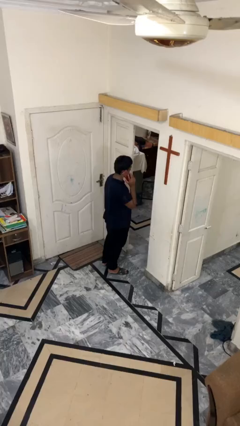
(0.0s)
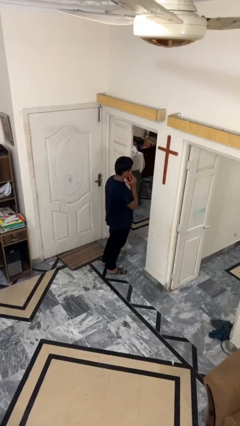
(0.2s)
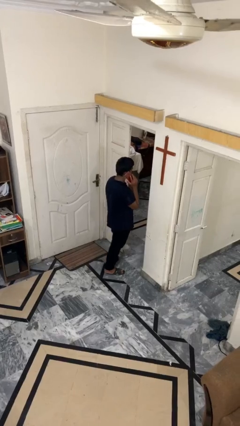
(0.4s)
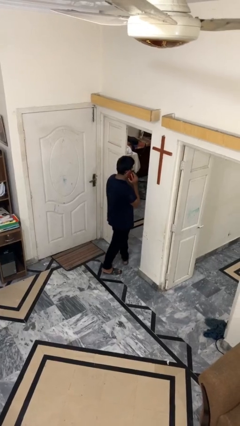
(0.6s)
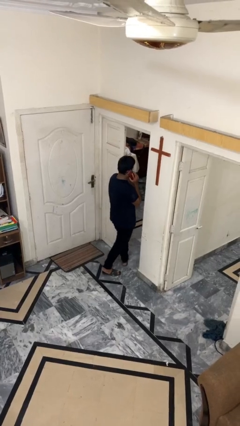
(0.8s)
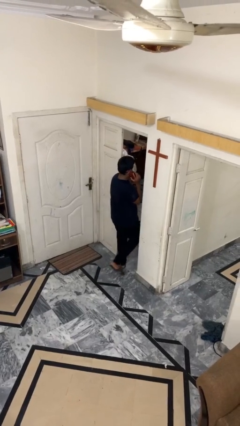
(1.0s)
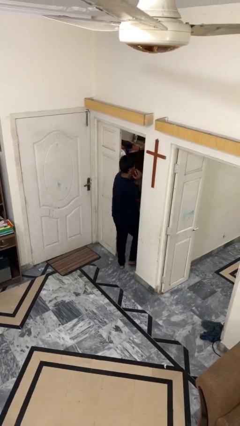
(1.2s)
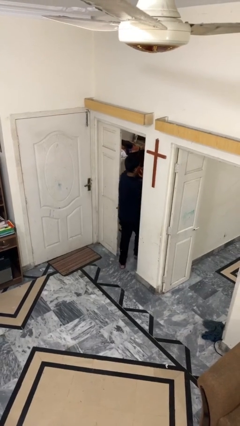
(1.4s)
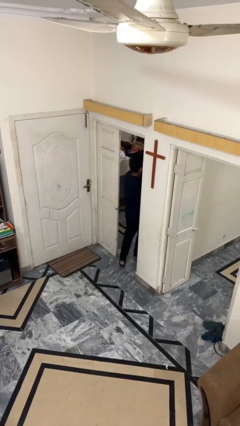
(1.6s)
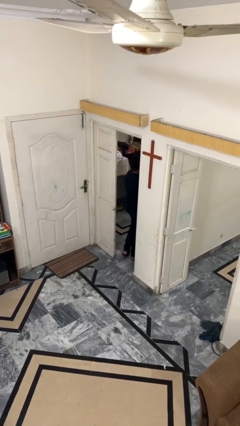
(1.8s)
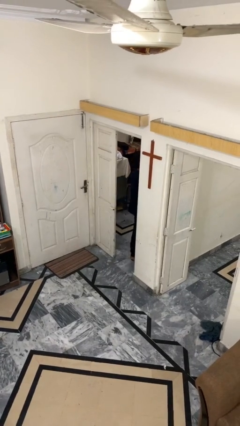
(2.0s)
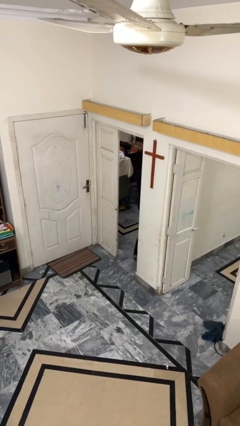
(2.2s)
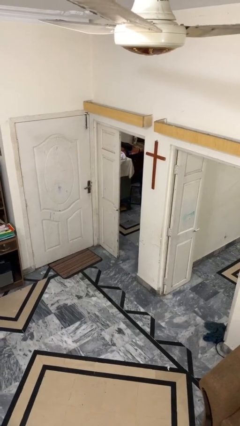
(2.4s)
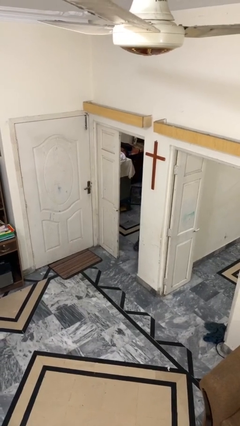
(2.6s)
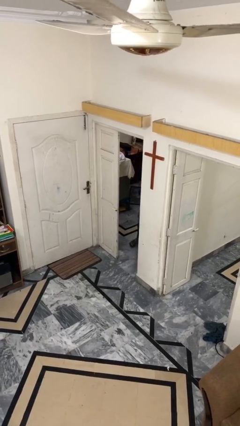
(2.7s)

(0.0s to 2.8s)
person exits scene through structure

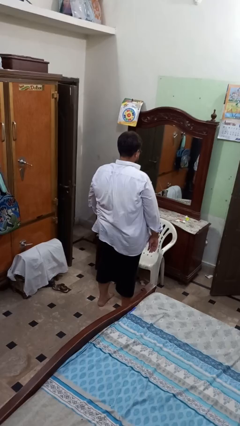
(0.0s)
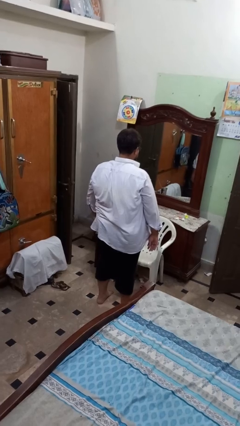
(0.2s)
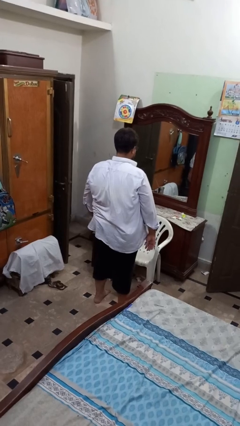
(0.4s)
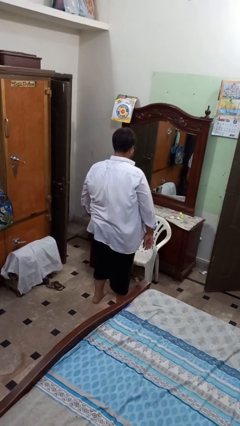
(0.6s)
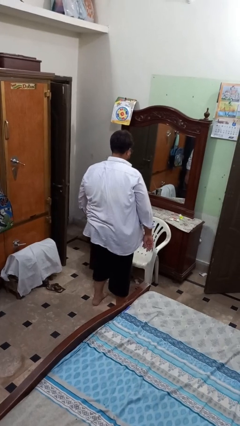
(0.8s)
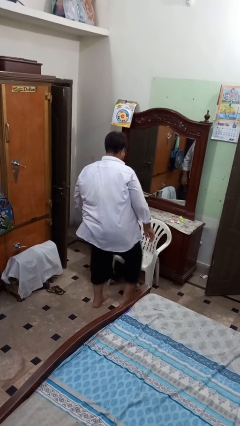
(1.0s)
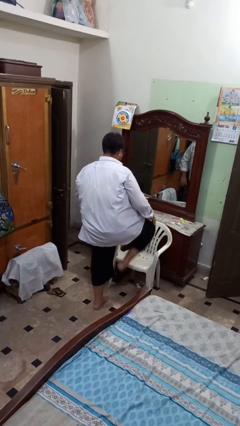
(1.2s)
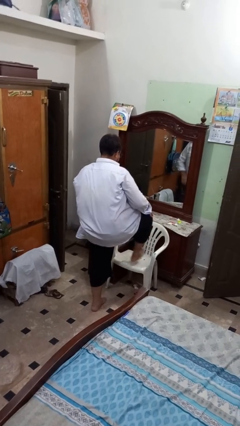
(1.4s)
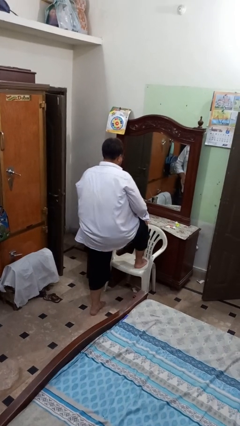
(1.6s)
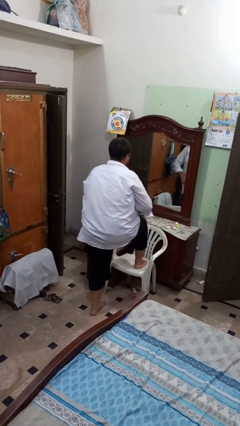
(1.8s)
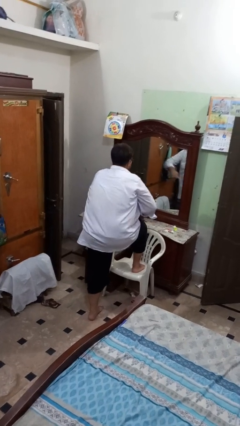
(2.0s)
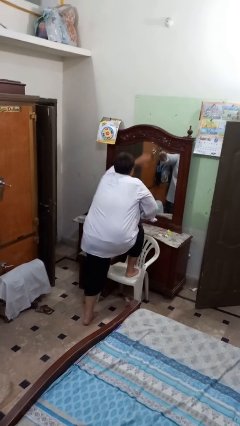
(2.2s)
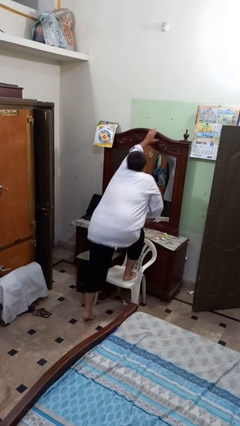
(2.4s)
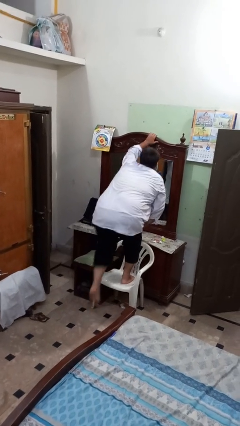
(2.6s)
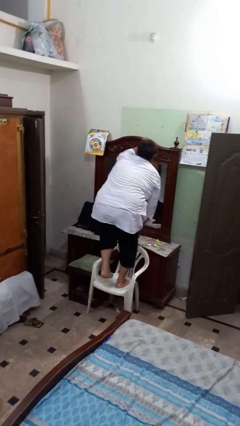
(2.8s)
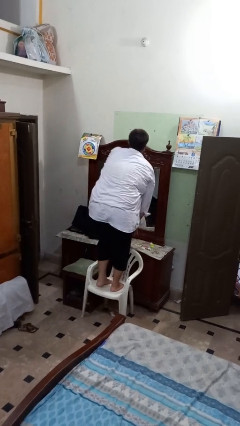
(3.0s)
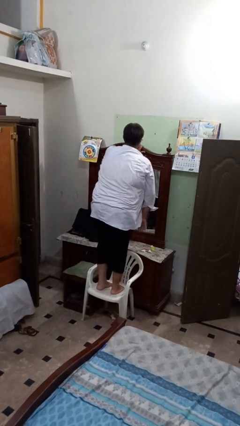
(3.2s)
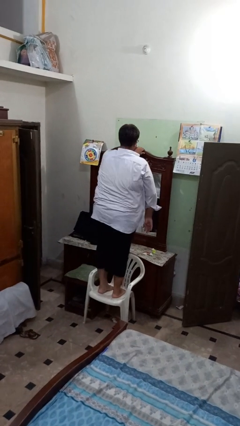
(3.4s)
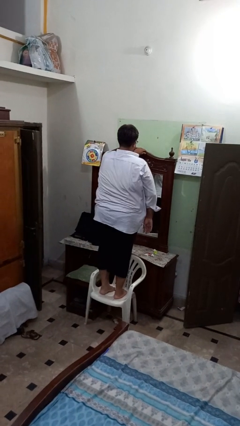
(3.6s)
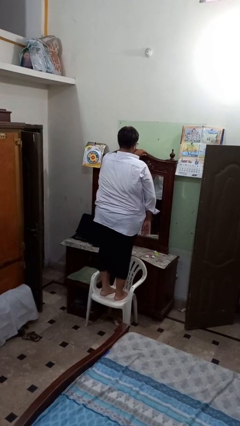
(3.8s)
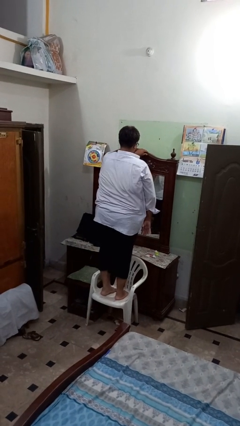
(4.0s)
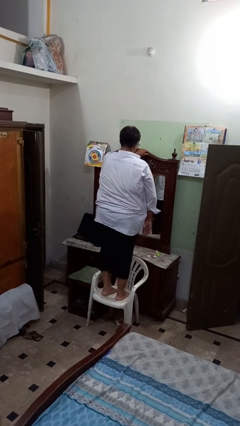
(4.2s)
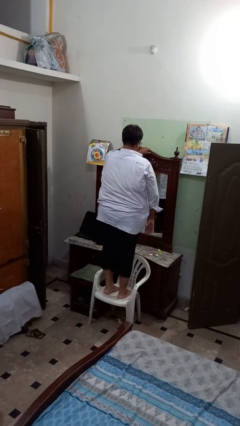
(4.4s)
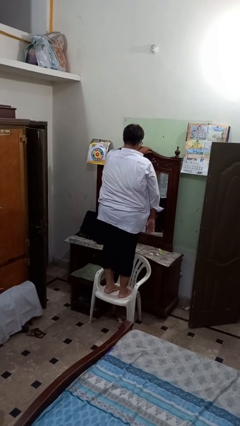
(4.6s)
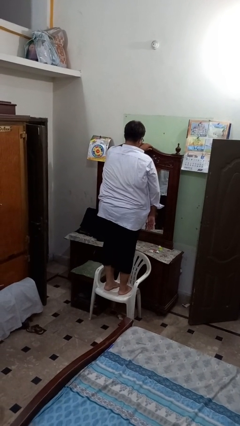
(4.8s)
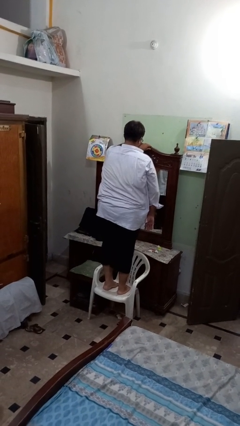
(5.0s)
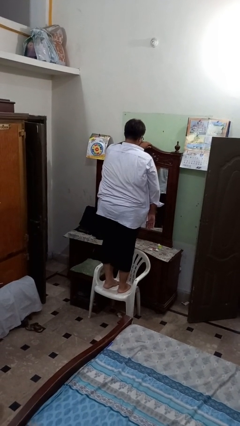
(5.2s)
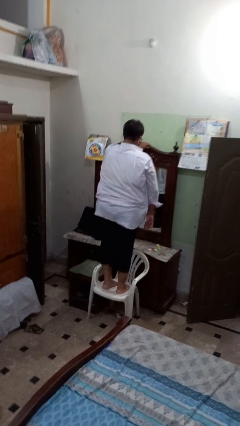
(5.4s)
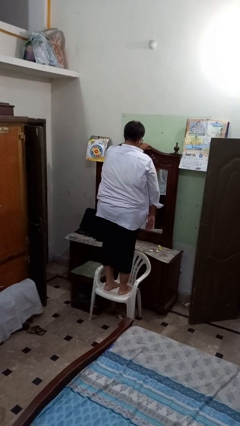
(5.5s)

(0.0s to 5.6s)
person climbs on chair

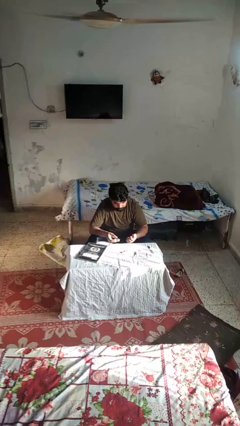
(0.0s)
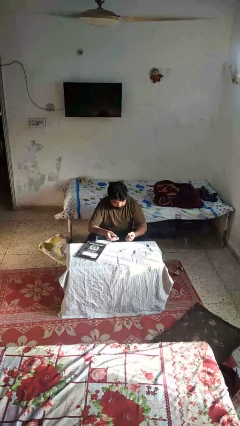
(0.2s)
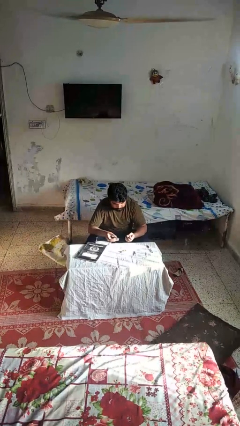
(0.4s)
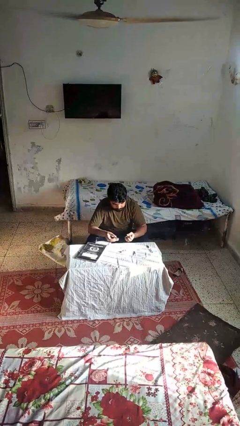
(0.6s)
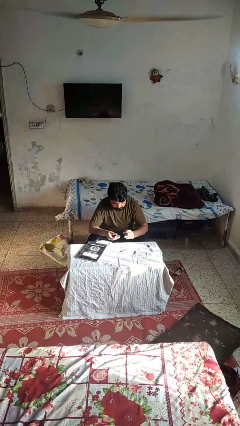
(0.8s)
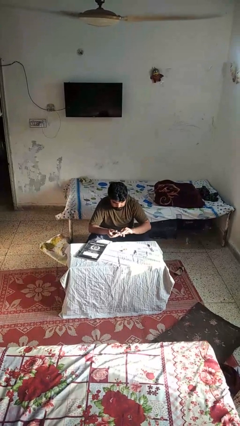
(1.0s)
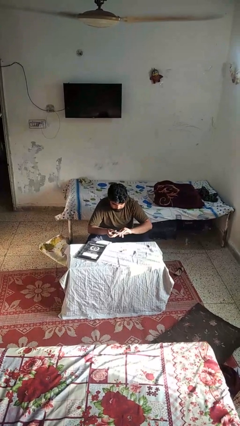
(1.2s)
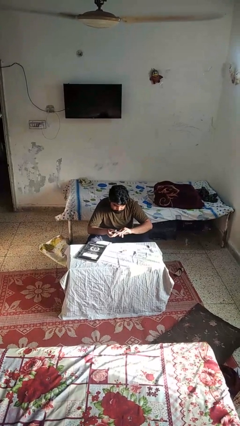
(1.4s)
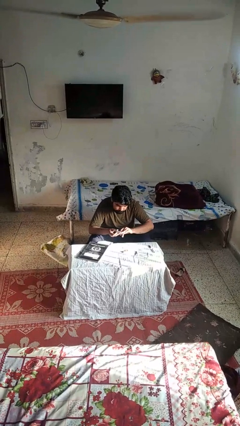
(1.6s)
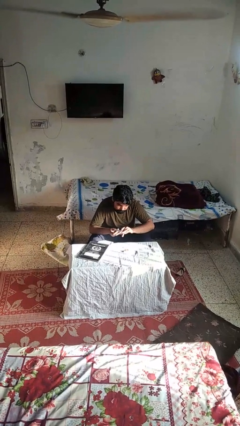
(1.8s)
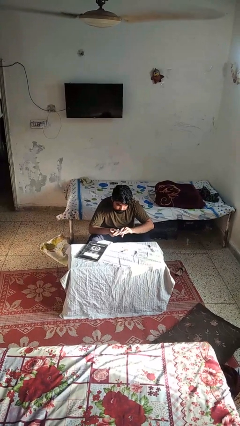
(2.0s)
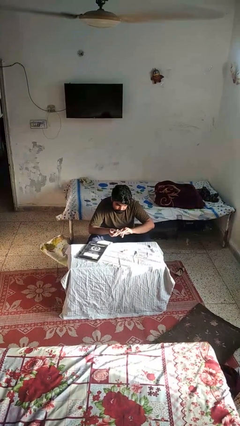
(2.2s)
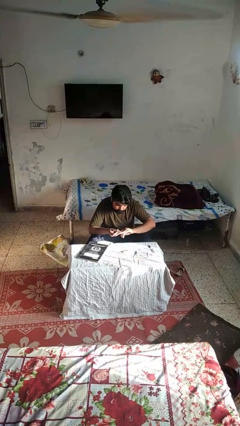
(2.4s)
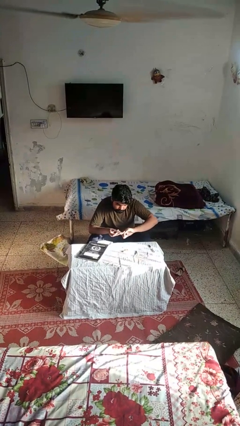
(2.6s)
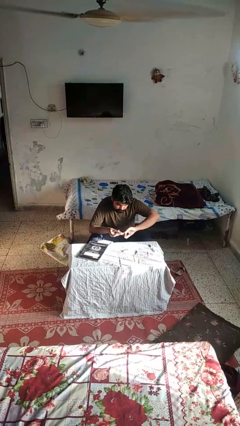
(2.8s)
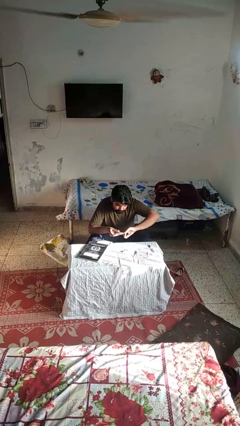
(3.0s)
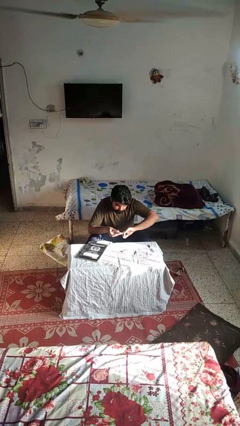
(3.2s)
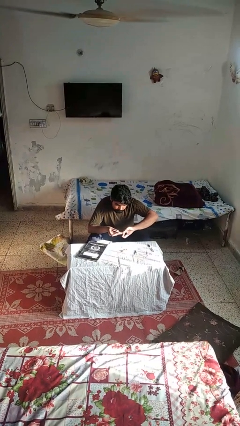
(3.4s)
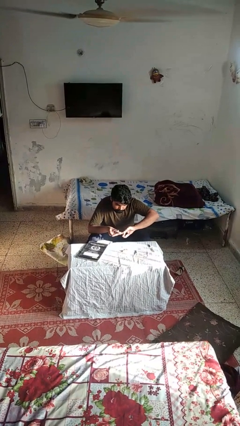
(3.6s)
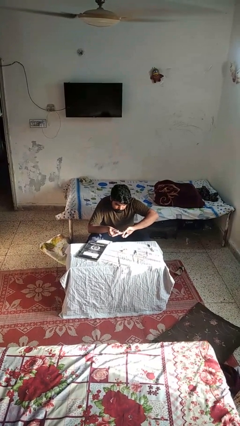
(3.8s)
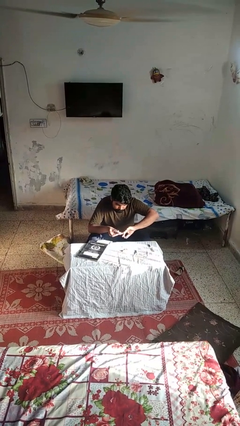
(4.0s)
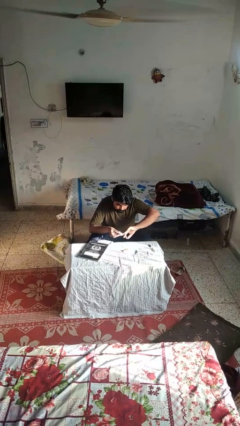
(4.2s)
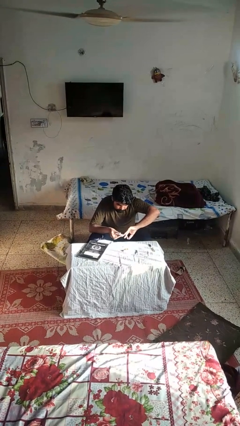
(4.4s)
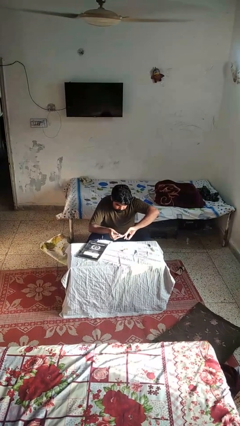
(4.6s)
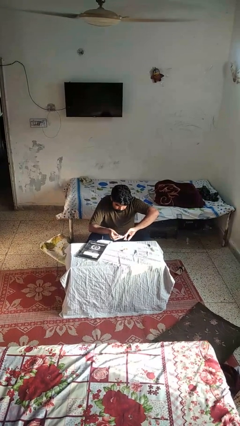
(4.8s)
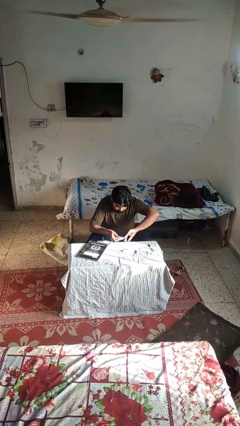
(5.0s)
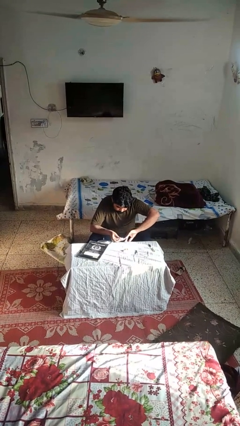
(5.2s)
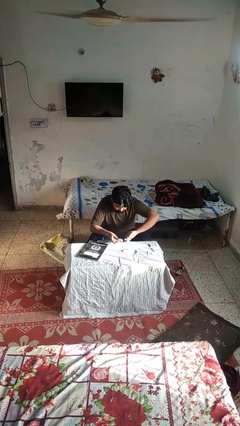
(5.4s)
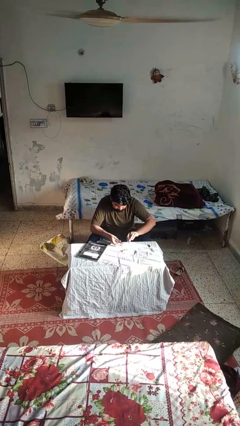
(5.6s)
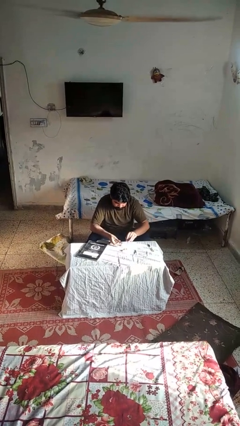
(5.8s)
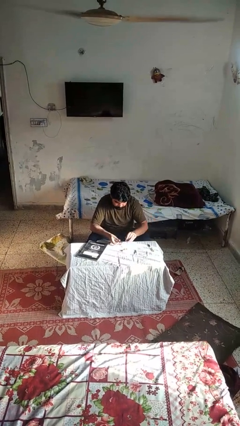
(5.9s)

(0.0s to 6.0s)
person clips fingernails

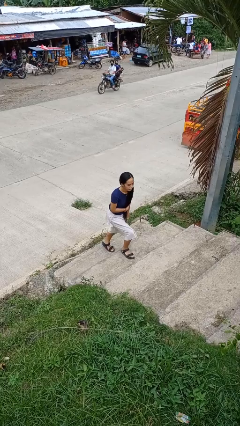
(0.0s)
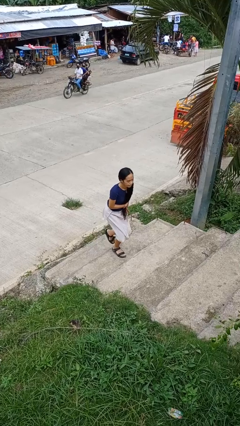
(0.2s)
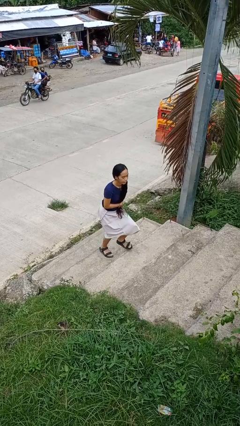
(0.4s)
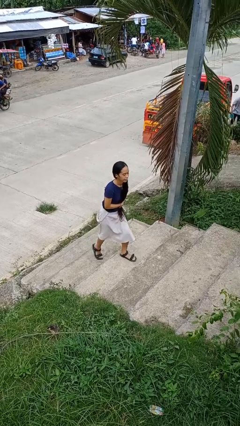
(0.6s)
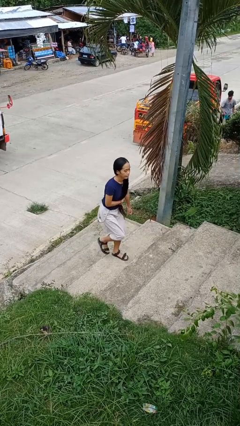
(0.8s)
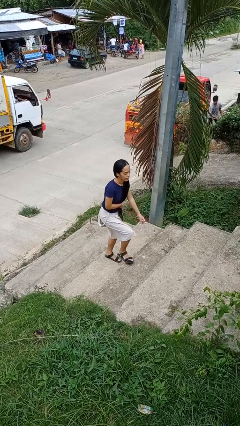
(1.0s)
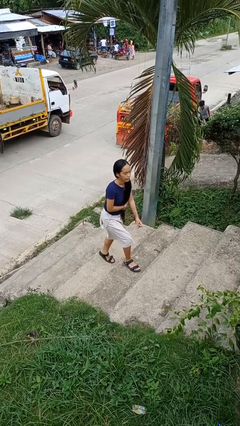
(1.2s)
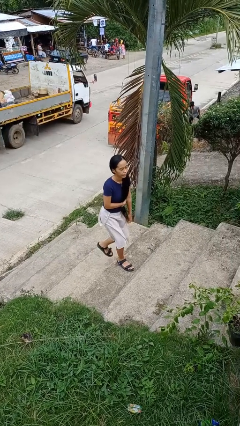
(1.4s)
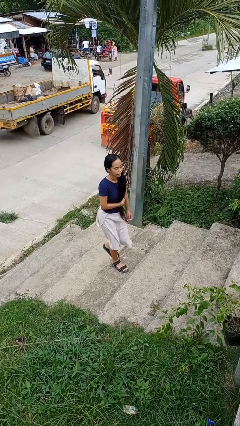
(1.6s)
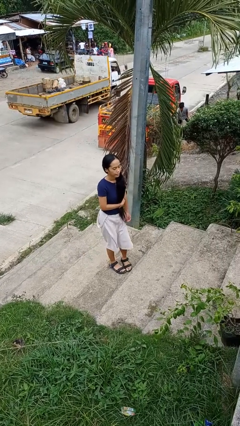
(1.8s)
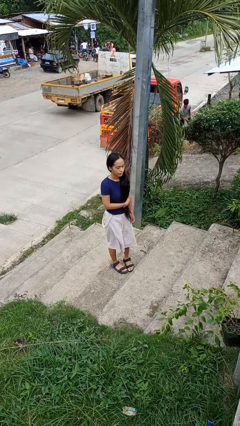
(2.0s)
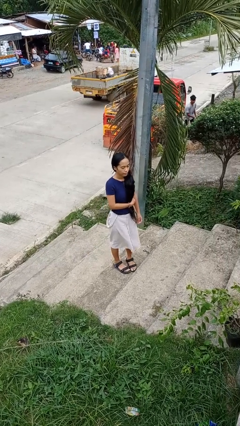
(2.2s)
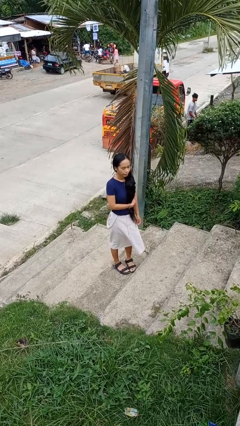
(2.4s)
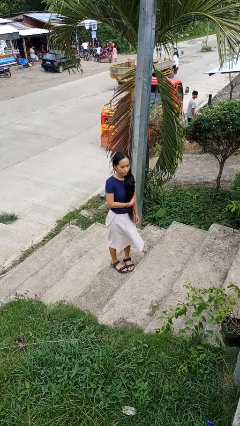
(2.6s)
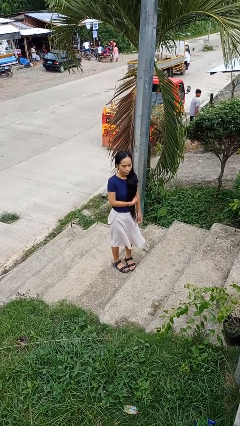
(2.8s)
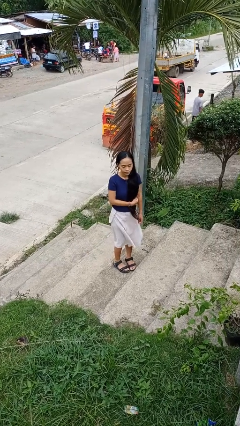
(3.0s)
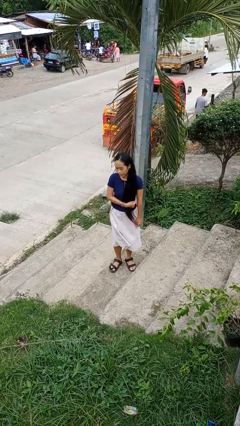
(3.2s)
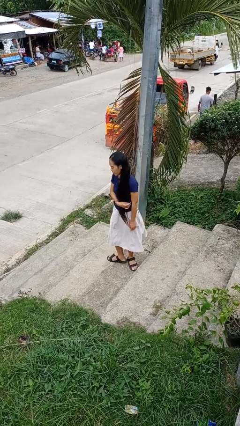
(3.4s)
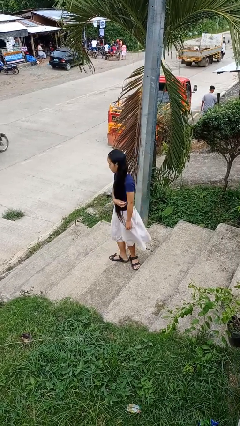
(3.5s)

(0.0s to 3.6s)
person climbs up stairs

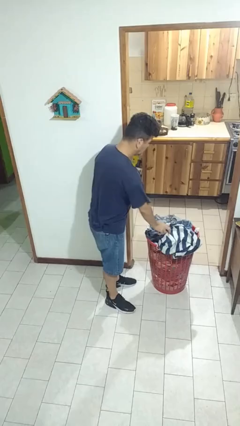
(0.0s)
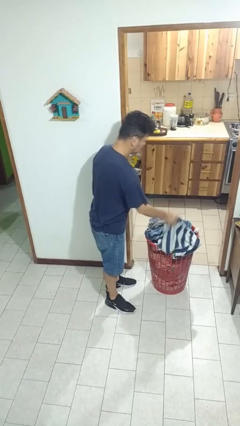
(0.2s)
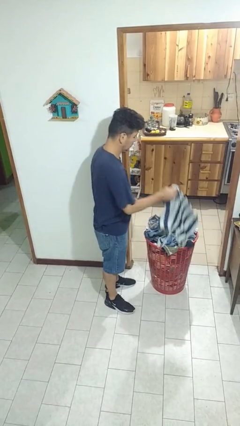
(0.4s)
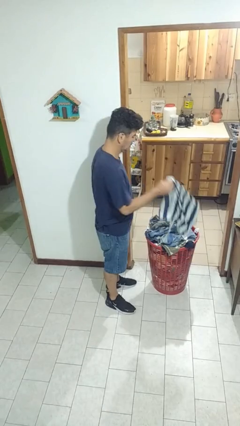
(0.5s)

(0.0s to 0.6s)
person takes object from basket
